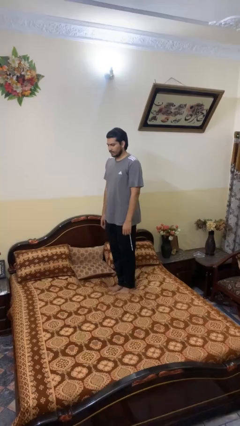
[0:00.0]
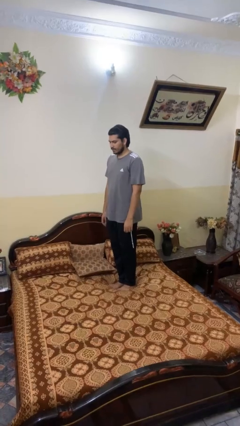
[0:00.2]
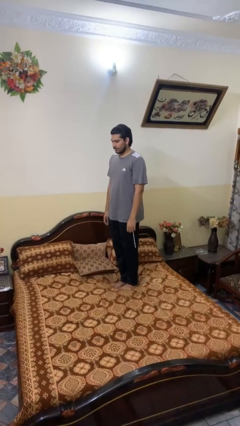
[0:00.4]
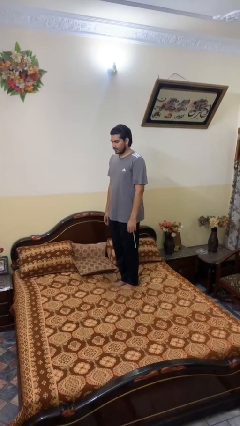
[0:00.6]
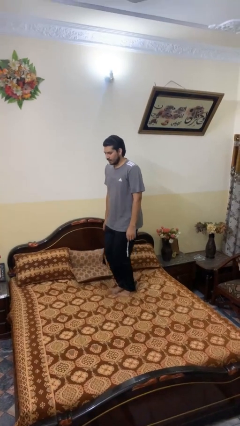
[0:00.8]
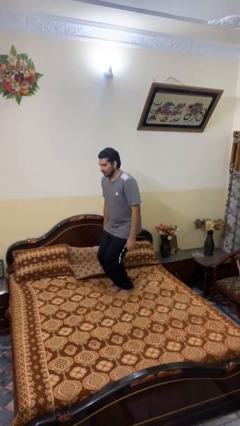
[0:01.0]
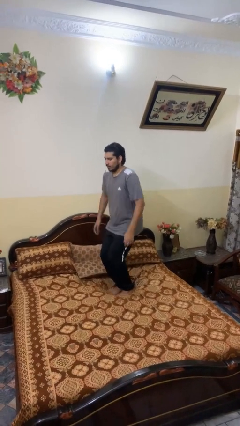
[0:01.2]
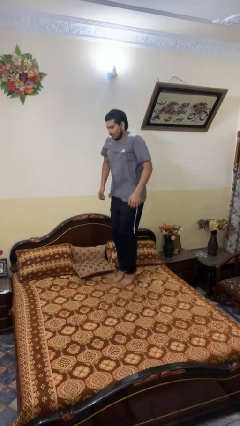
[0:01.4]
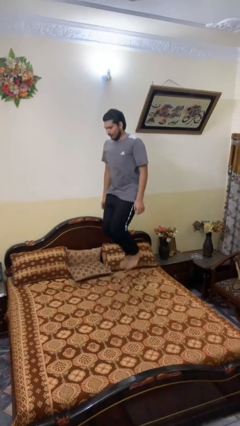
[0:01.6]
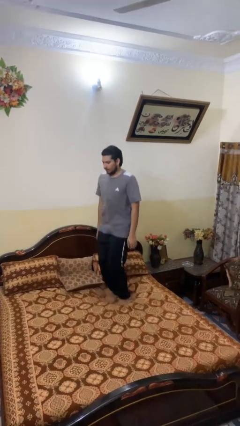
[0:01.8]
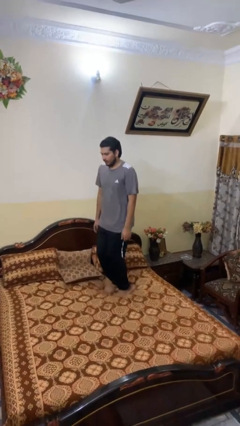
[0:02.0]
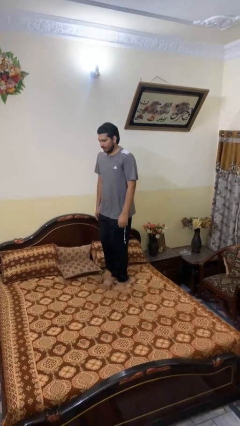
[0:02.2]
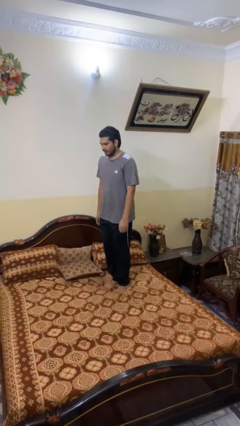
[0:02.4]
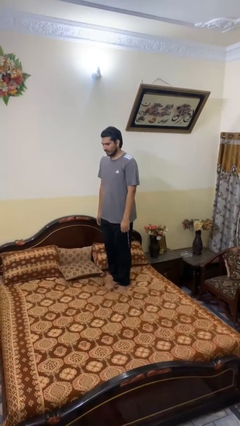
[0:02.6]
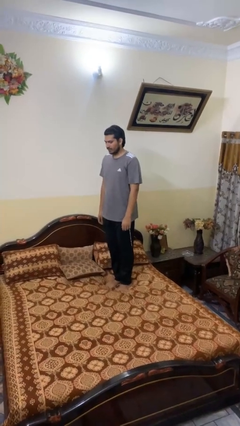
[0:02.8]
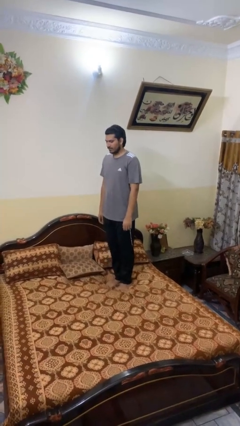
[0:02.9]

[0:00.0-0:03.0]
person jumps on bed

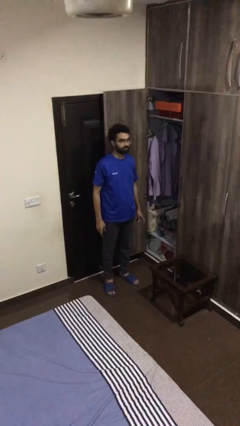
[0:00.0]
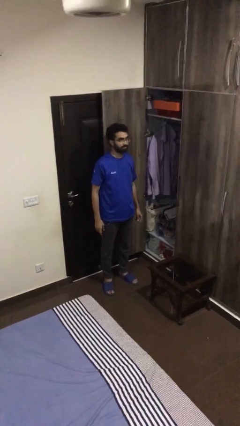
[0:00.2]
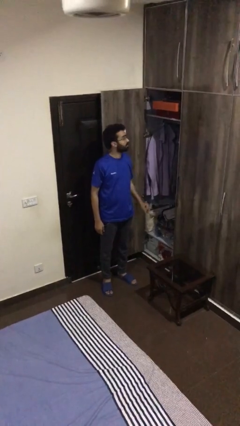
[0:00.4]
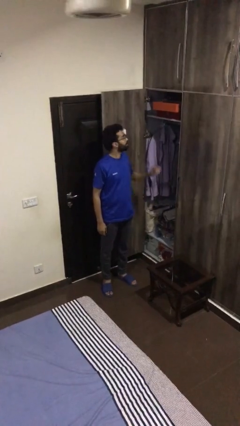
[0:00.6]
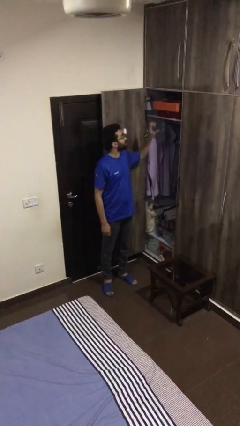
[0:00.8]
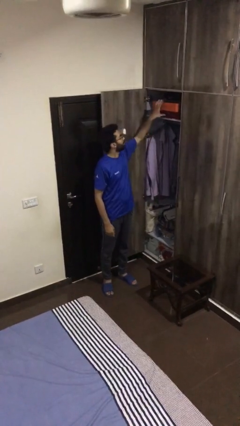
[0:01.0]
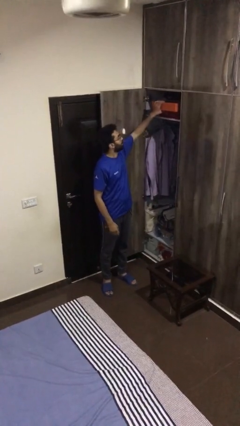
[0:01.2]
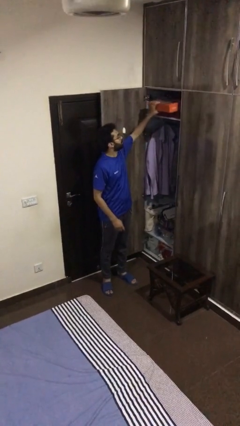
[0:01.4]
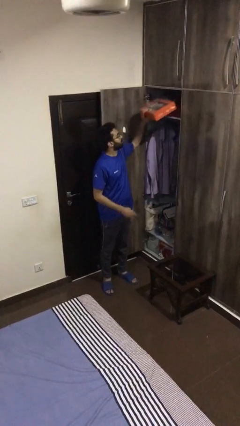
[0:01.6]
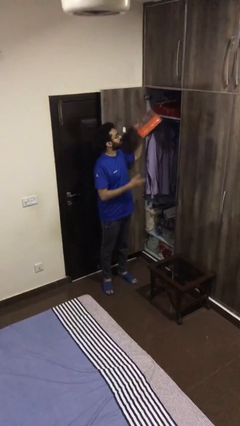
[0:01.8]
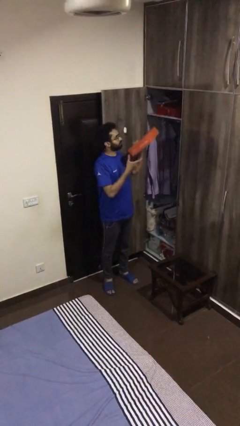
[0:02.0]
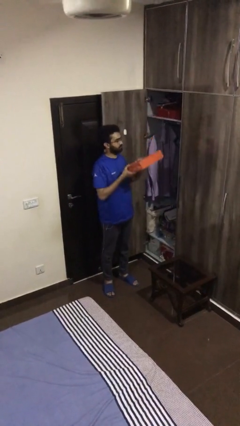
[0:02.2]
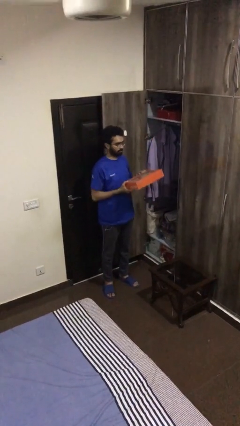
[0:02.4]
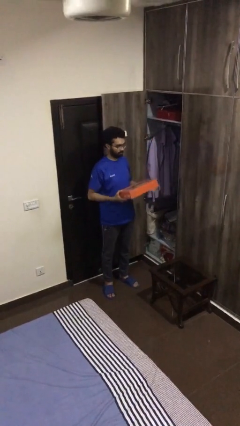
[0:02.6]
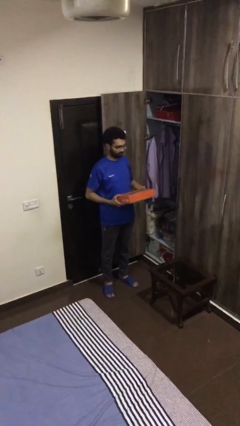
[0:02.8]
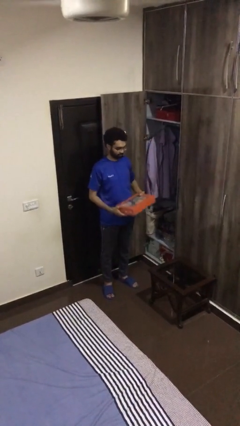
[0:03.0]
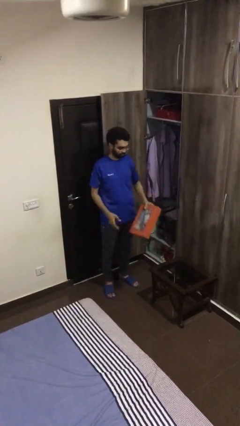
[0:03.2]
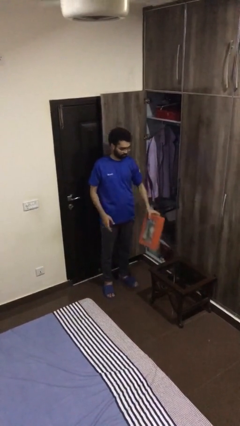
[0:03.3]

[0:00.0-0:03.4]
person picks up object from shelf

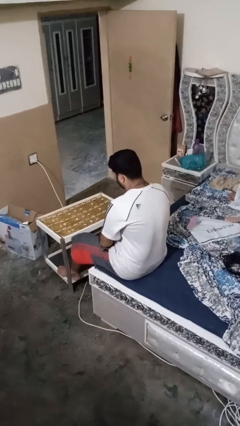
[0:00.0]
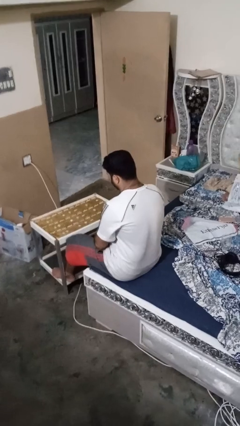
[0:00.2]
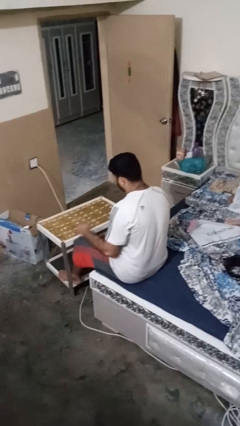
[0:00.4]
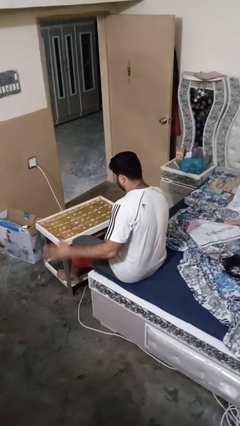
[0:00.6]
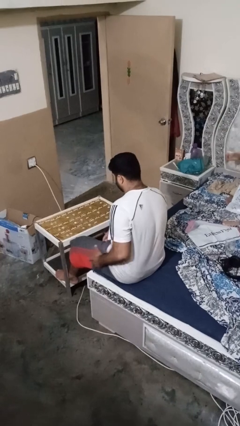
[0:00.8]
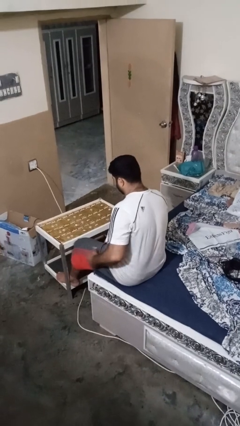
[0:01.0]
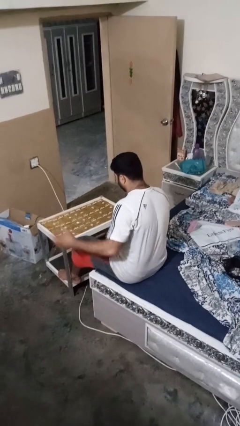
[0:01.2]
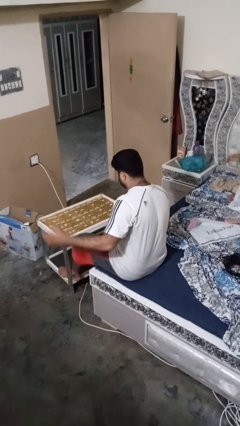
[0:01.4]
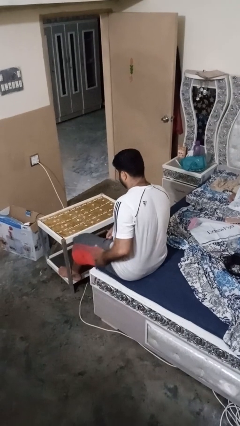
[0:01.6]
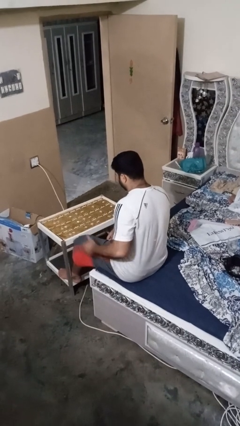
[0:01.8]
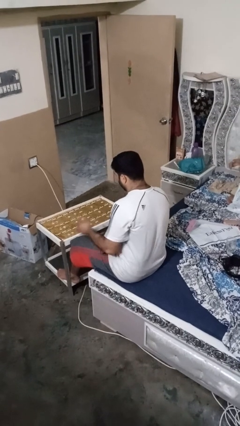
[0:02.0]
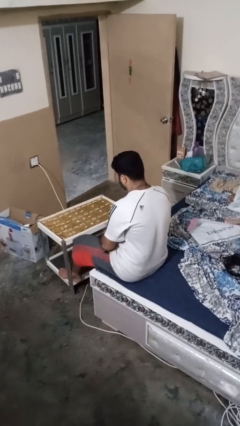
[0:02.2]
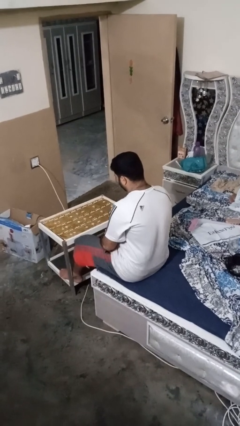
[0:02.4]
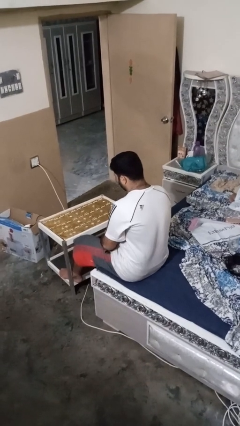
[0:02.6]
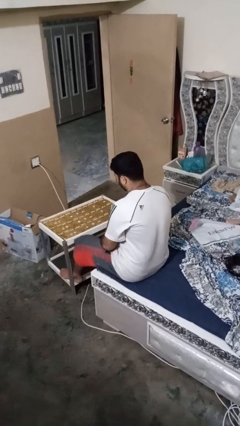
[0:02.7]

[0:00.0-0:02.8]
person slaps hands on thighs

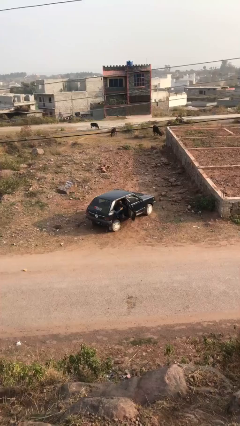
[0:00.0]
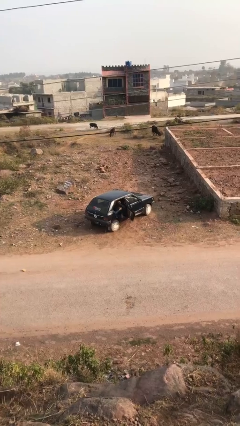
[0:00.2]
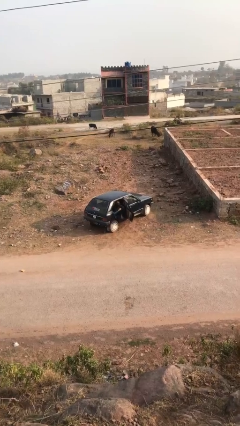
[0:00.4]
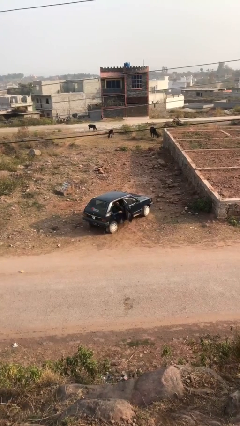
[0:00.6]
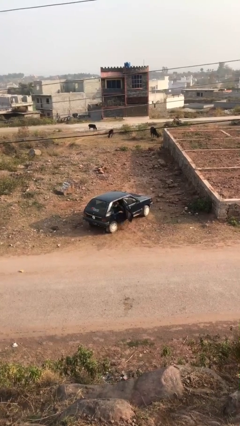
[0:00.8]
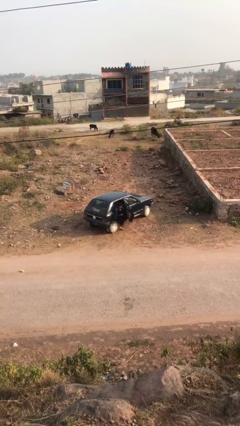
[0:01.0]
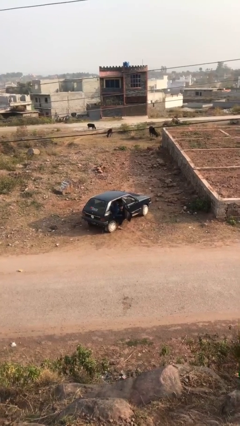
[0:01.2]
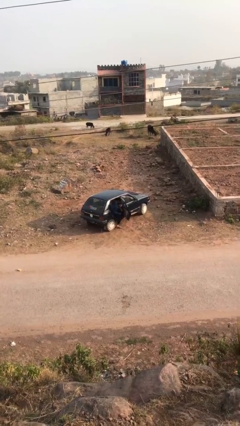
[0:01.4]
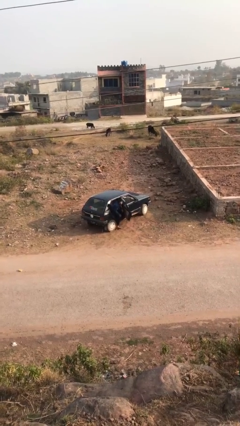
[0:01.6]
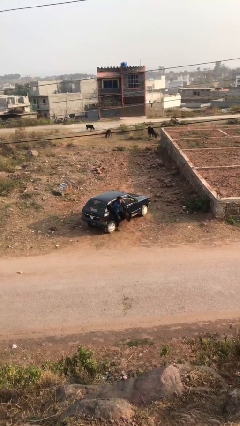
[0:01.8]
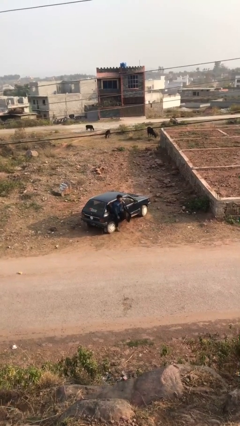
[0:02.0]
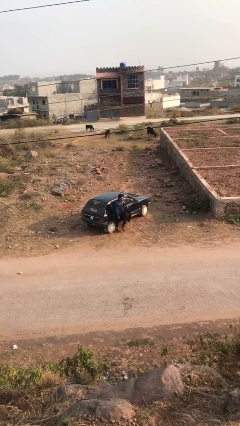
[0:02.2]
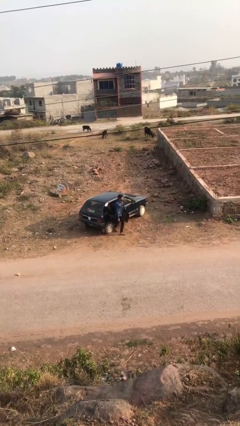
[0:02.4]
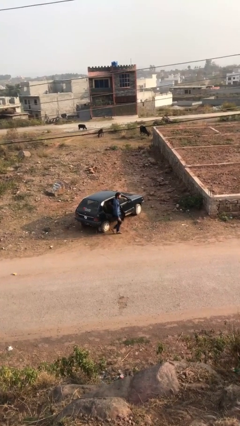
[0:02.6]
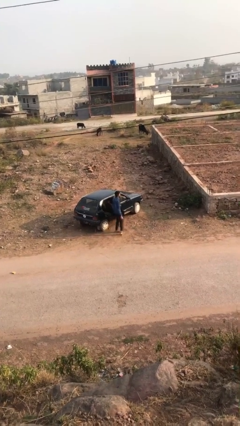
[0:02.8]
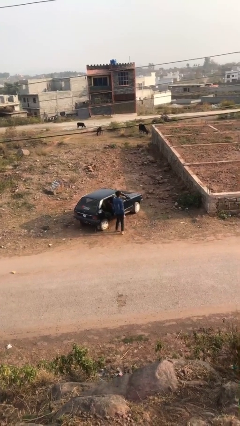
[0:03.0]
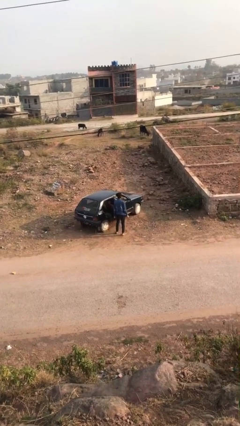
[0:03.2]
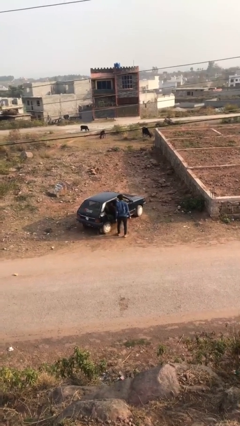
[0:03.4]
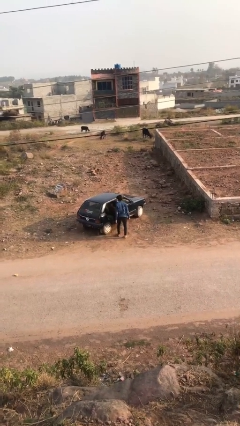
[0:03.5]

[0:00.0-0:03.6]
person exits car

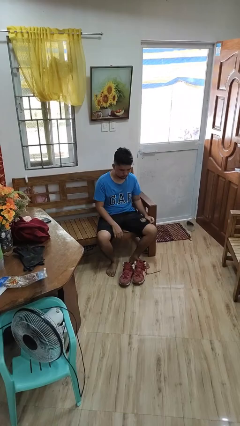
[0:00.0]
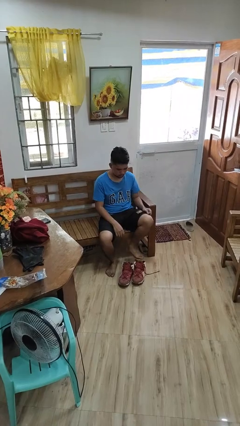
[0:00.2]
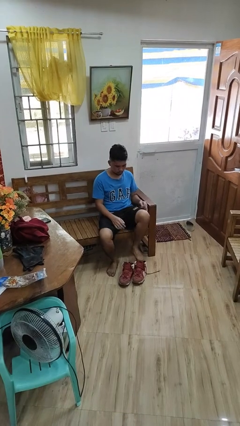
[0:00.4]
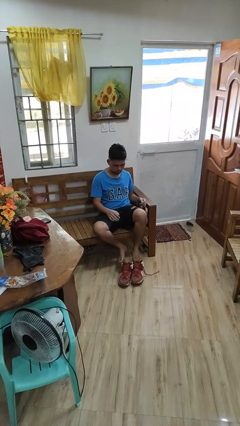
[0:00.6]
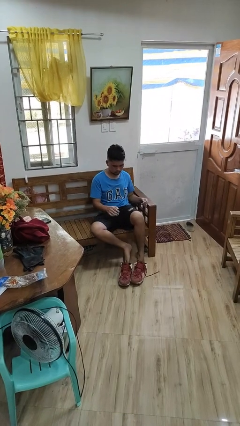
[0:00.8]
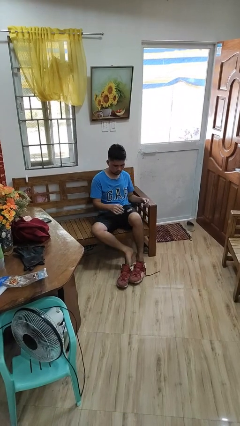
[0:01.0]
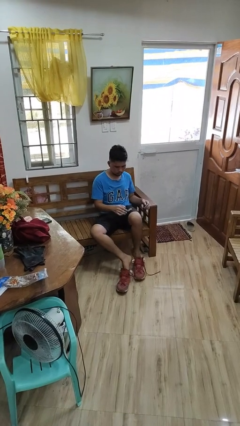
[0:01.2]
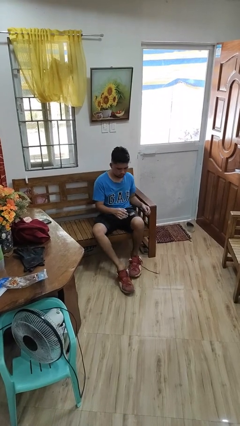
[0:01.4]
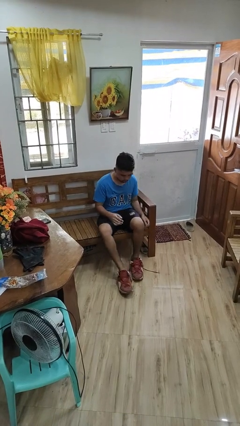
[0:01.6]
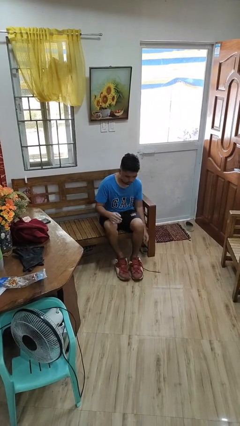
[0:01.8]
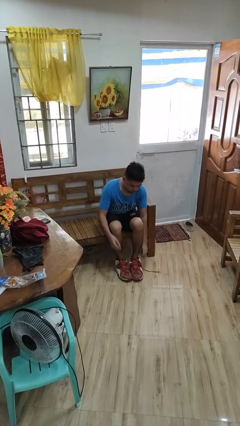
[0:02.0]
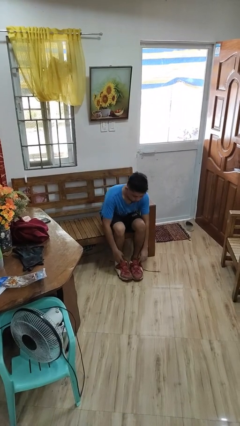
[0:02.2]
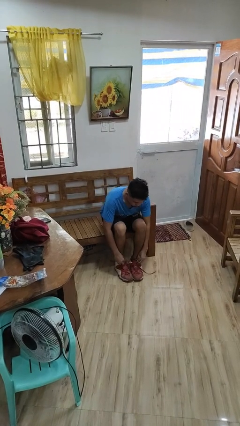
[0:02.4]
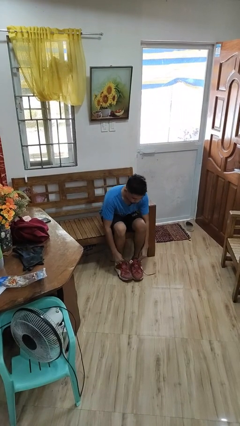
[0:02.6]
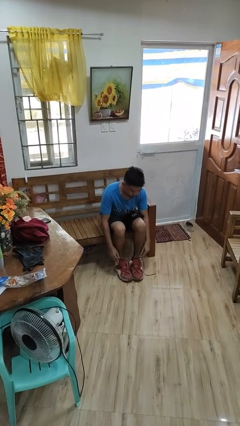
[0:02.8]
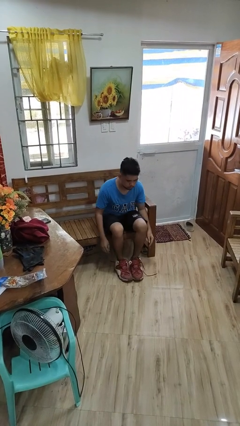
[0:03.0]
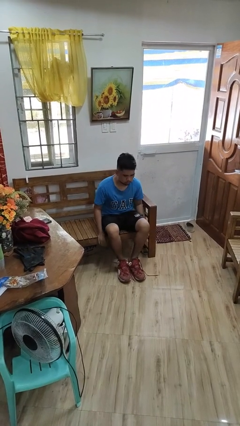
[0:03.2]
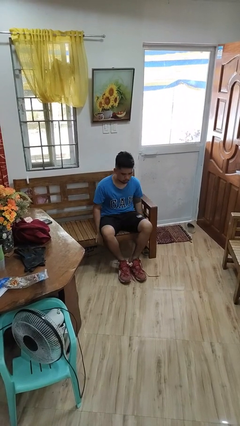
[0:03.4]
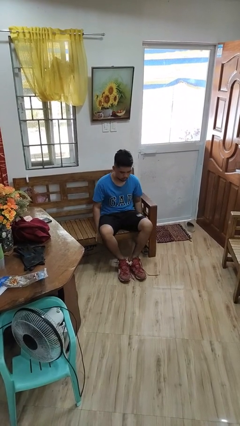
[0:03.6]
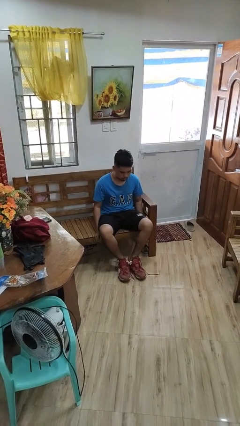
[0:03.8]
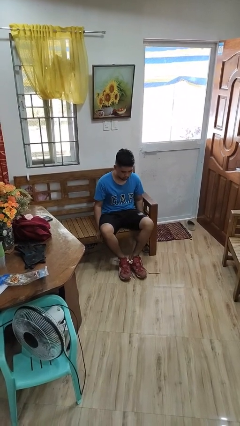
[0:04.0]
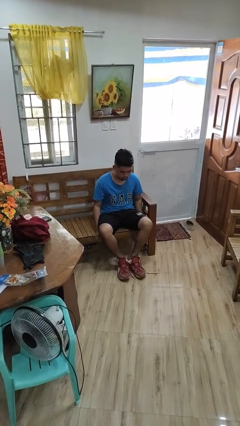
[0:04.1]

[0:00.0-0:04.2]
person puts on shoes

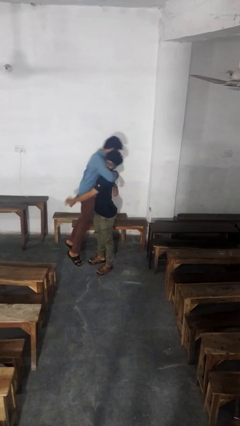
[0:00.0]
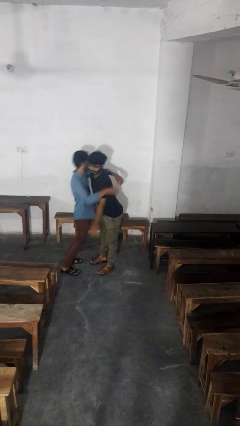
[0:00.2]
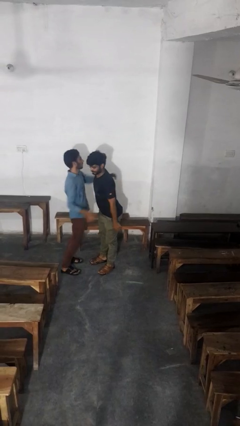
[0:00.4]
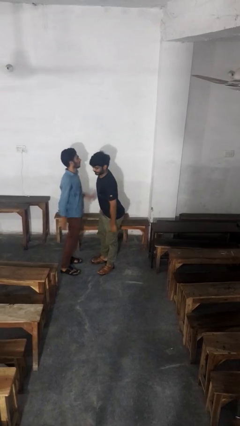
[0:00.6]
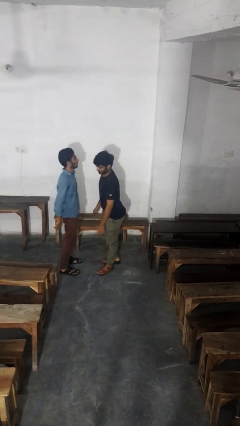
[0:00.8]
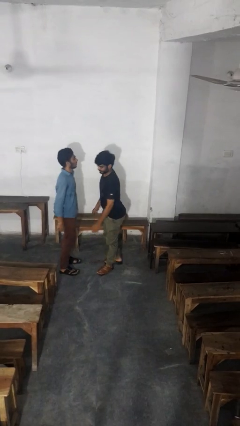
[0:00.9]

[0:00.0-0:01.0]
person puts down person
